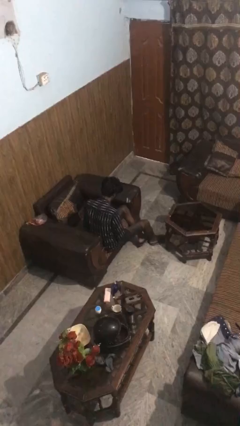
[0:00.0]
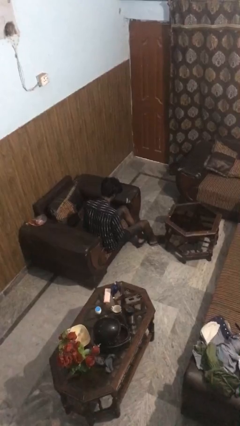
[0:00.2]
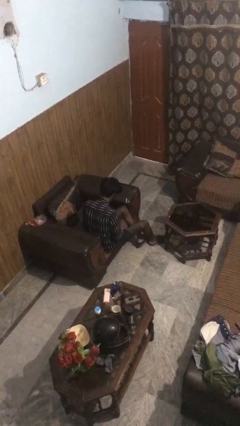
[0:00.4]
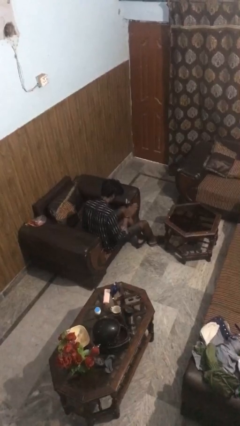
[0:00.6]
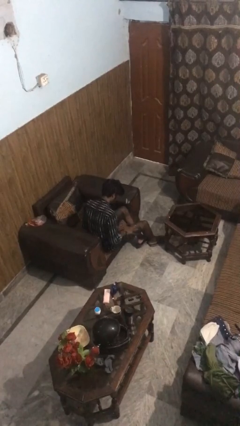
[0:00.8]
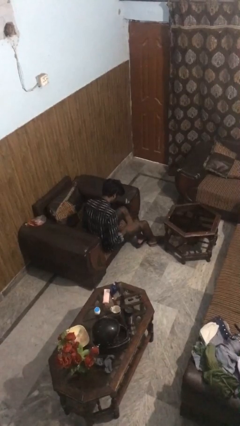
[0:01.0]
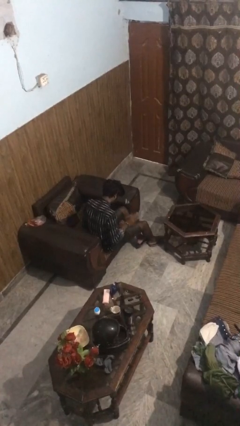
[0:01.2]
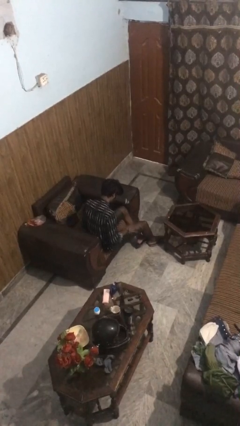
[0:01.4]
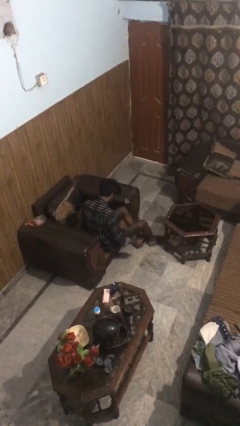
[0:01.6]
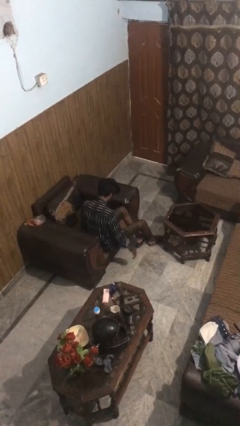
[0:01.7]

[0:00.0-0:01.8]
person slaps hands on thighs

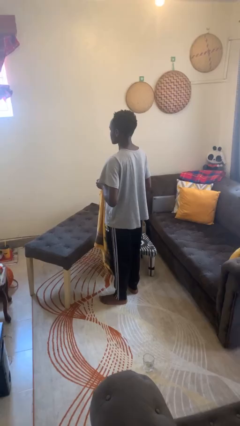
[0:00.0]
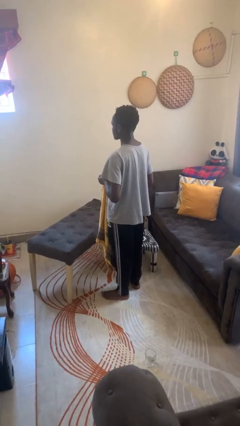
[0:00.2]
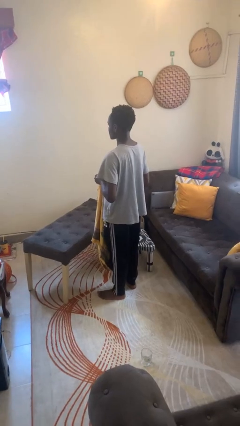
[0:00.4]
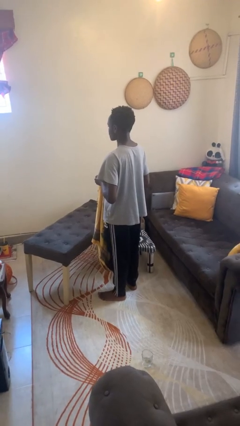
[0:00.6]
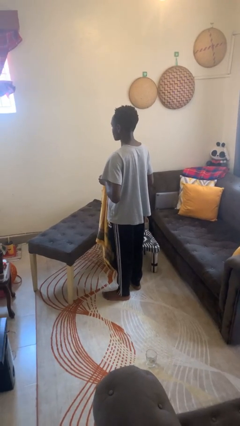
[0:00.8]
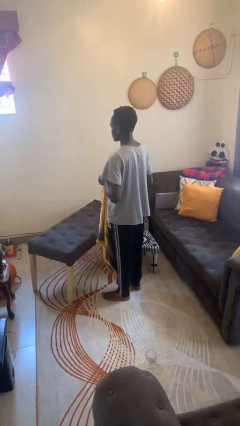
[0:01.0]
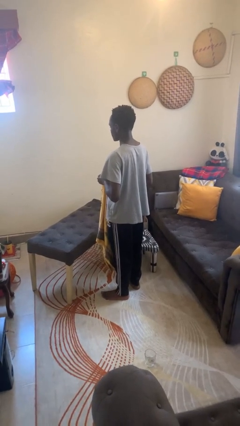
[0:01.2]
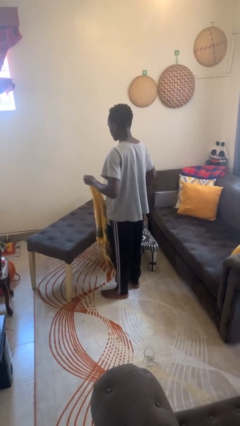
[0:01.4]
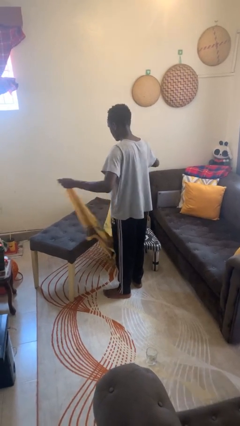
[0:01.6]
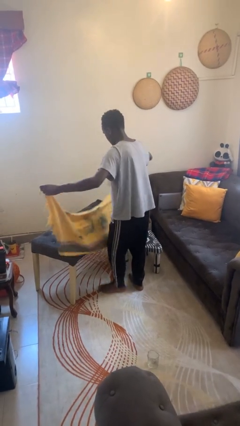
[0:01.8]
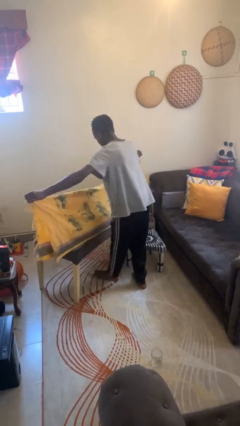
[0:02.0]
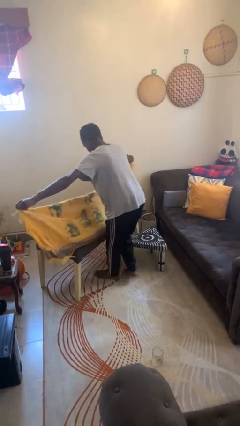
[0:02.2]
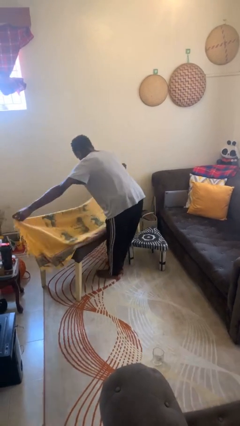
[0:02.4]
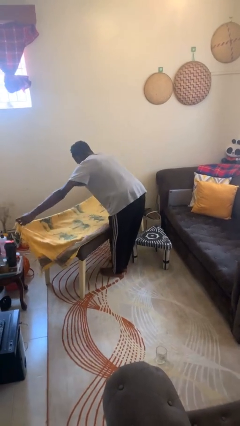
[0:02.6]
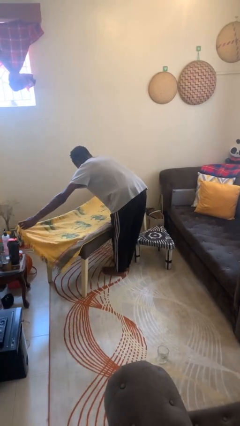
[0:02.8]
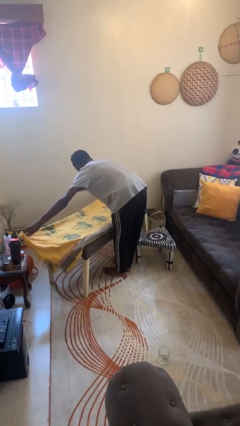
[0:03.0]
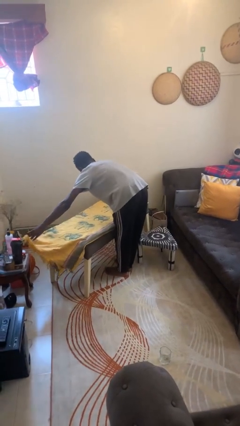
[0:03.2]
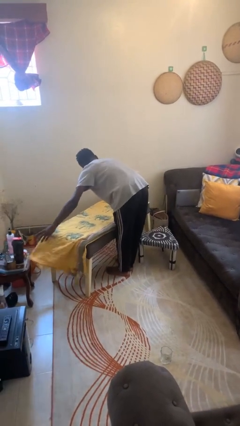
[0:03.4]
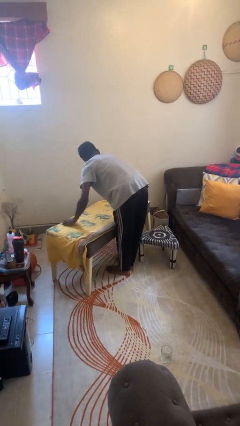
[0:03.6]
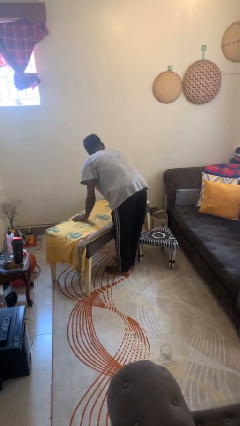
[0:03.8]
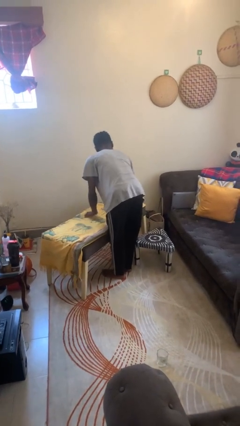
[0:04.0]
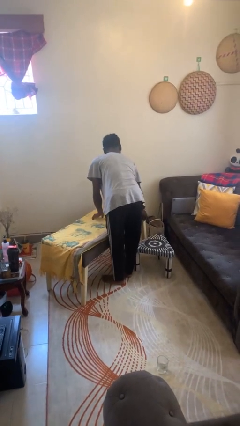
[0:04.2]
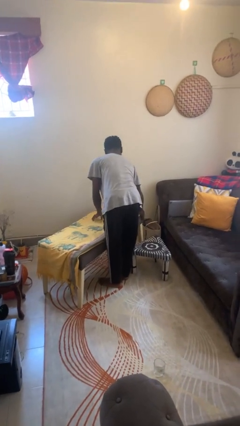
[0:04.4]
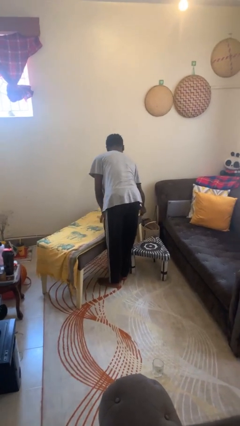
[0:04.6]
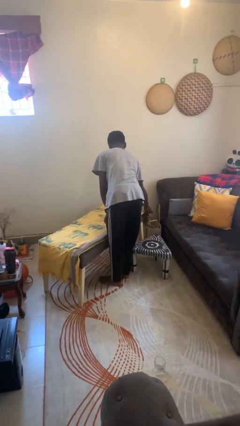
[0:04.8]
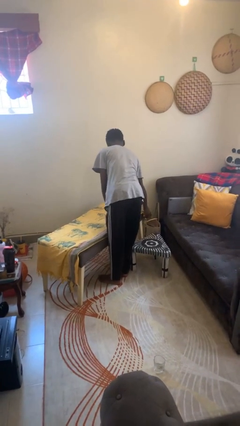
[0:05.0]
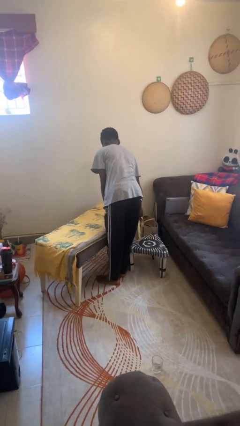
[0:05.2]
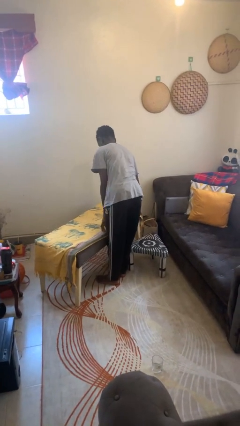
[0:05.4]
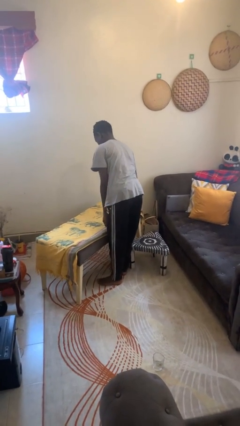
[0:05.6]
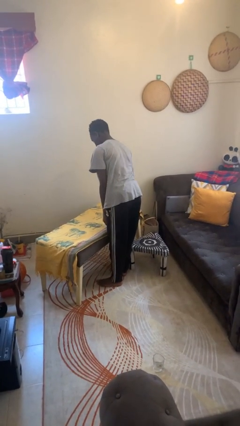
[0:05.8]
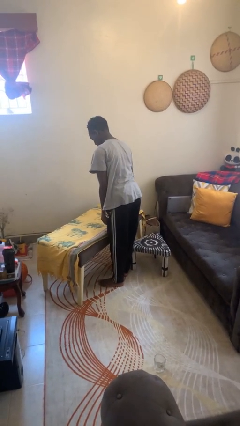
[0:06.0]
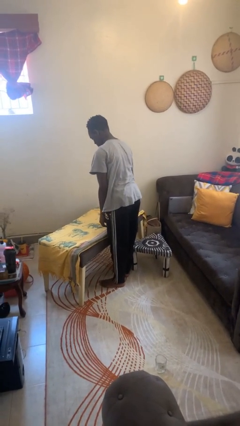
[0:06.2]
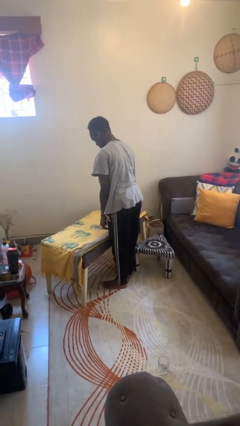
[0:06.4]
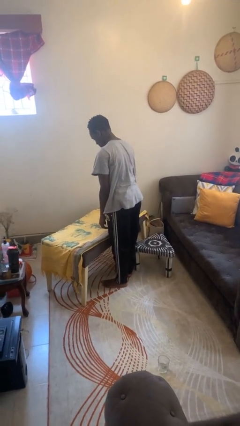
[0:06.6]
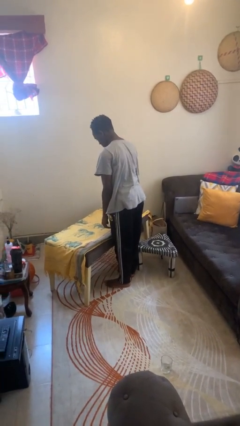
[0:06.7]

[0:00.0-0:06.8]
person spreads tablecloth

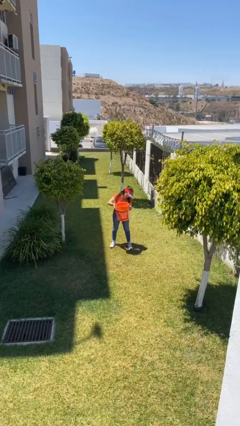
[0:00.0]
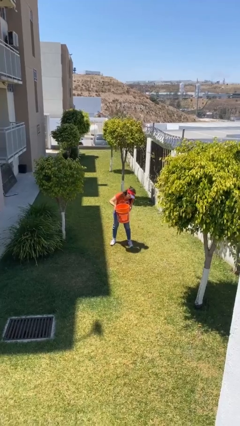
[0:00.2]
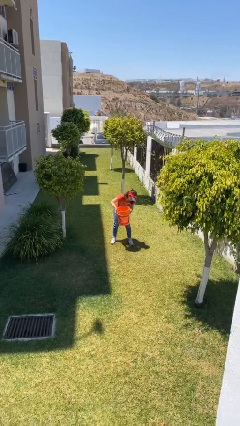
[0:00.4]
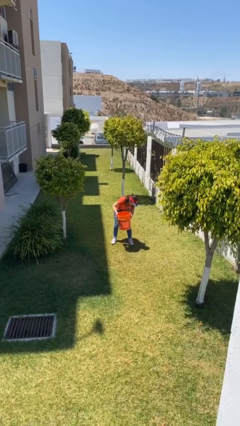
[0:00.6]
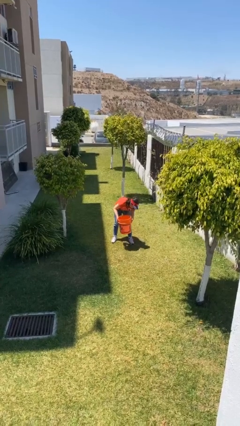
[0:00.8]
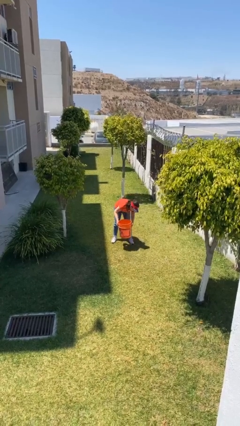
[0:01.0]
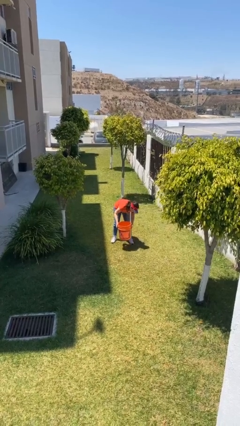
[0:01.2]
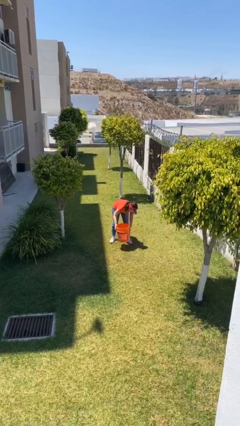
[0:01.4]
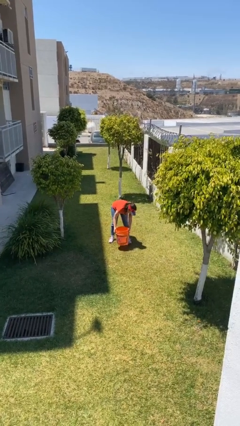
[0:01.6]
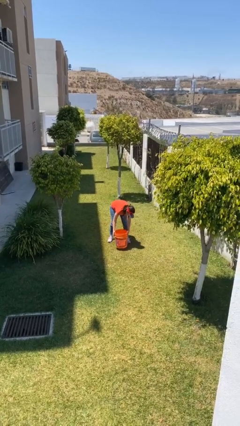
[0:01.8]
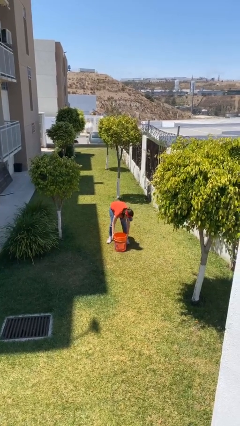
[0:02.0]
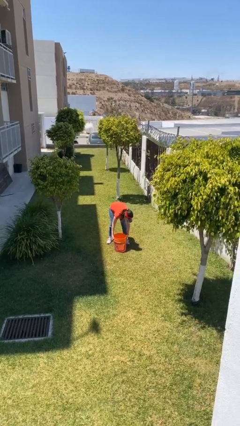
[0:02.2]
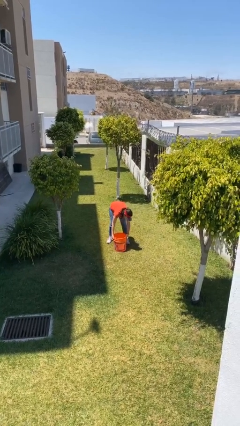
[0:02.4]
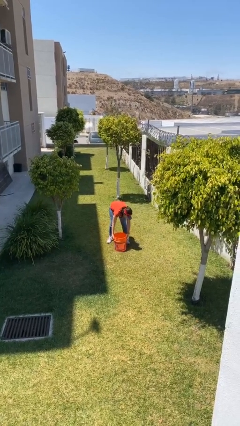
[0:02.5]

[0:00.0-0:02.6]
person puts down object on floor

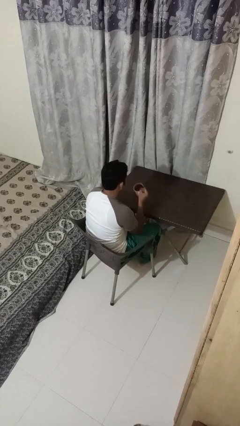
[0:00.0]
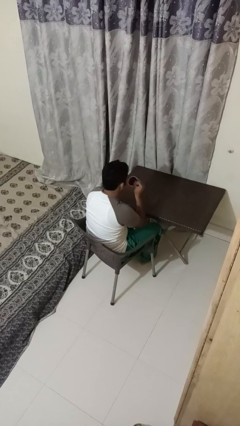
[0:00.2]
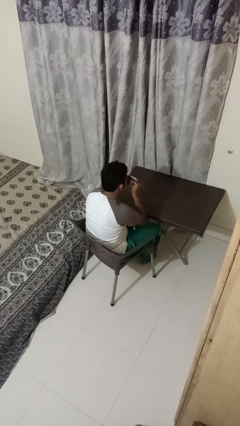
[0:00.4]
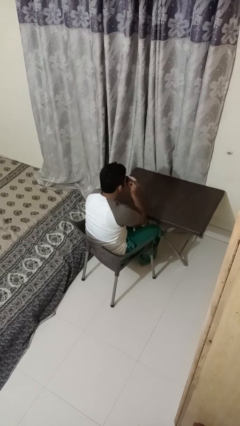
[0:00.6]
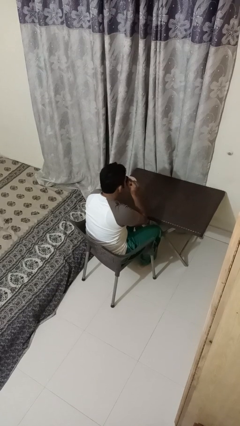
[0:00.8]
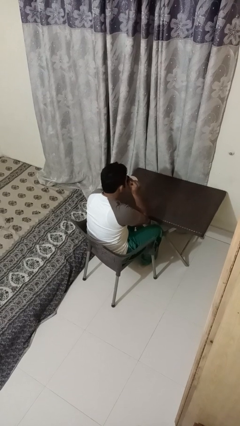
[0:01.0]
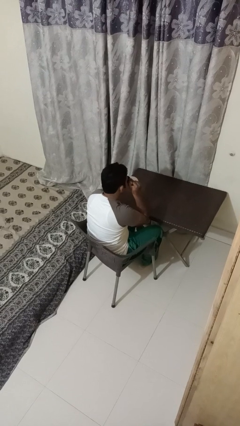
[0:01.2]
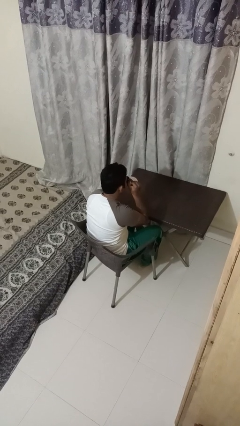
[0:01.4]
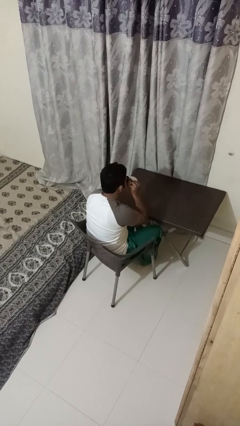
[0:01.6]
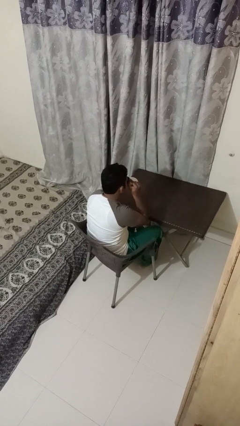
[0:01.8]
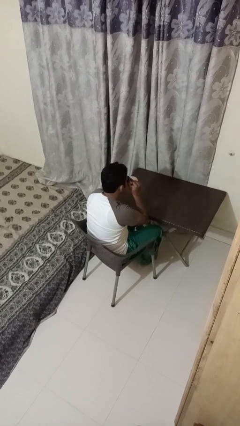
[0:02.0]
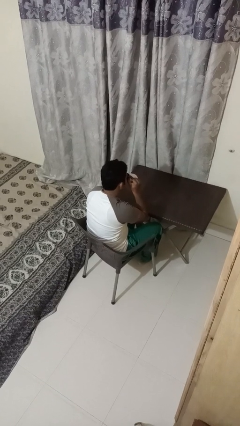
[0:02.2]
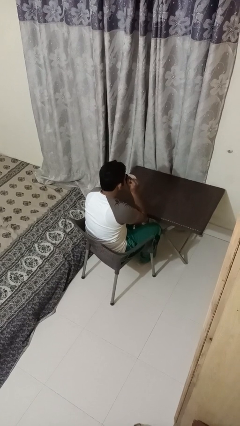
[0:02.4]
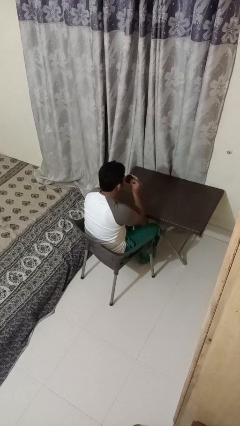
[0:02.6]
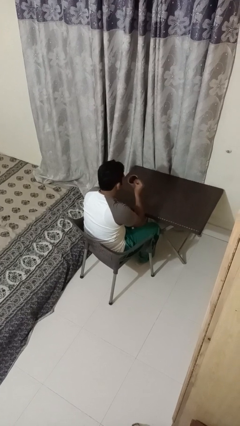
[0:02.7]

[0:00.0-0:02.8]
person drinks from mug

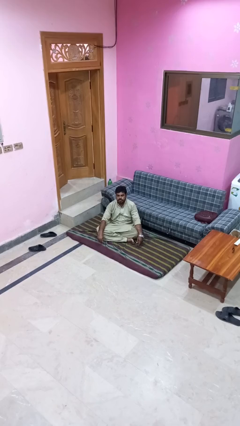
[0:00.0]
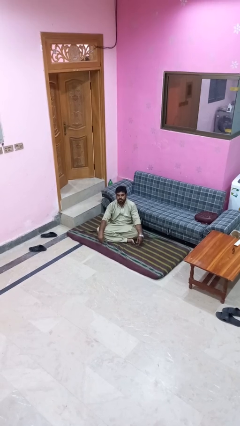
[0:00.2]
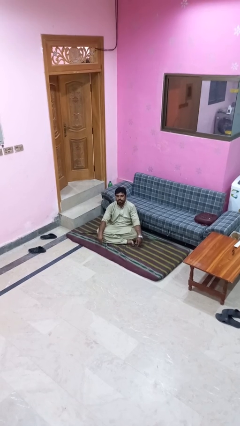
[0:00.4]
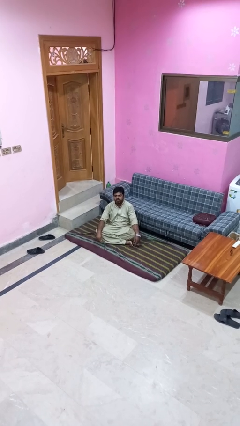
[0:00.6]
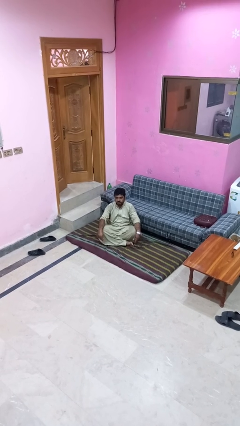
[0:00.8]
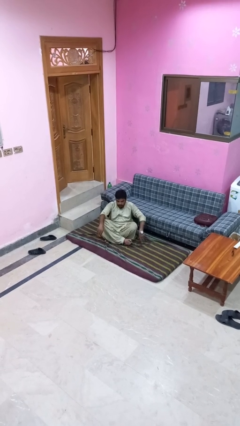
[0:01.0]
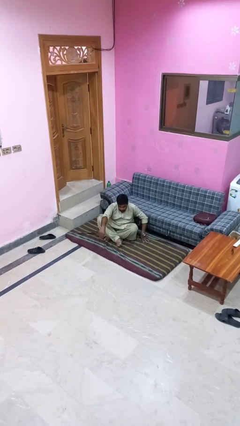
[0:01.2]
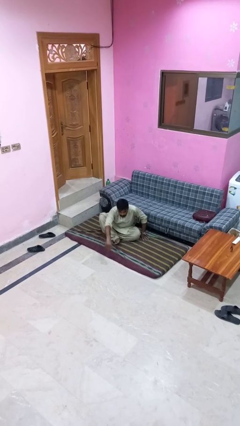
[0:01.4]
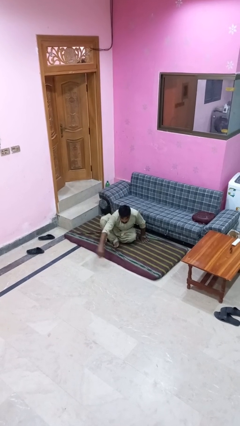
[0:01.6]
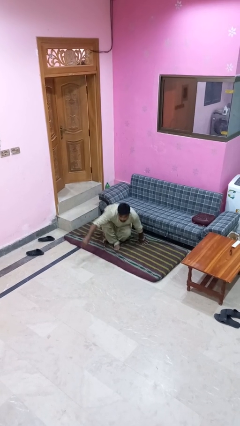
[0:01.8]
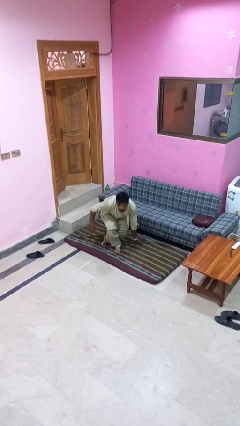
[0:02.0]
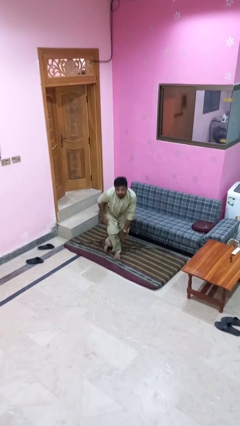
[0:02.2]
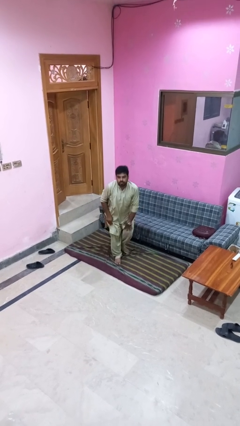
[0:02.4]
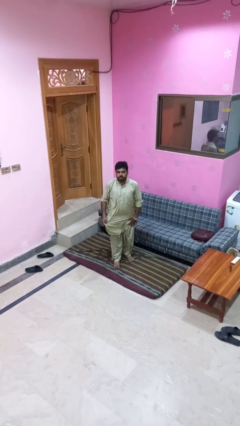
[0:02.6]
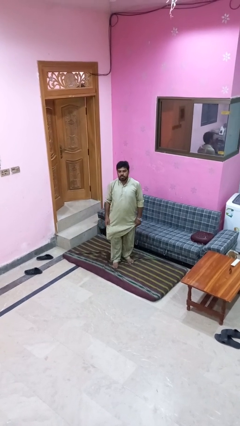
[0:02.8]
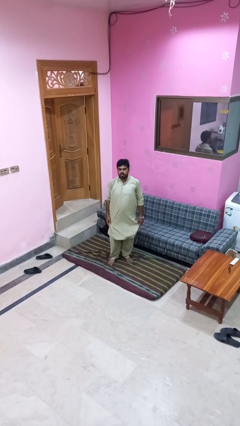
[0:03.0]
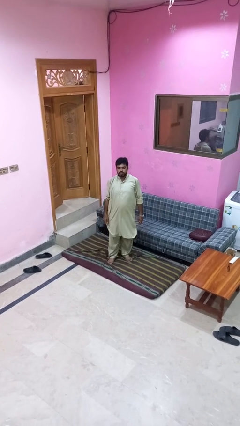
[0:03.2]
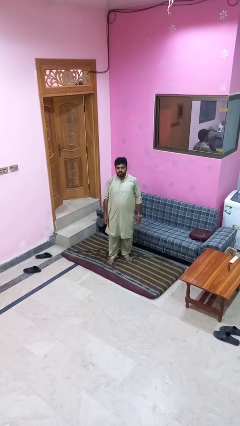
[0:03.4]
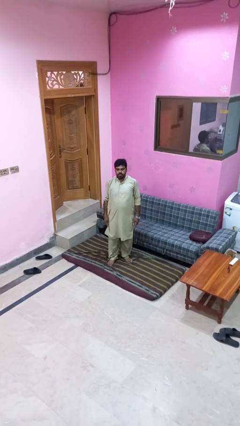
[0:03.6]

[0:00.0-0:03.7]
person stands up from floor
